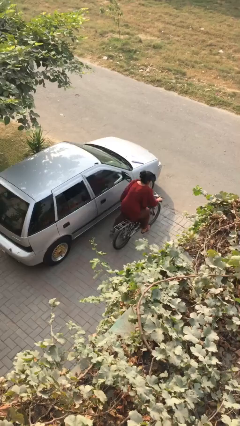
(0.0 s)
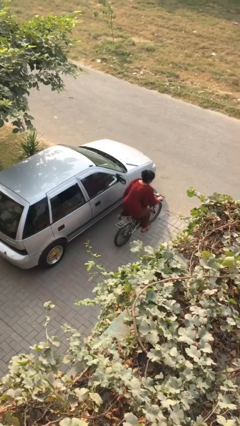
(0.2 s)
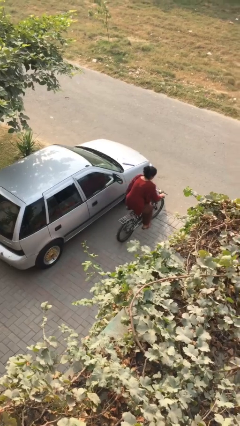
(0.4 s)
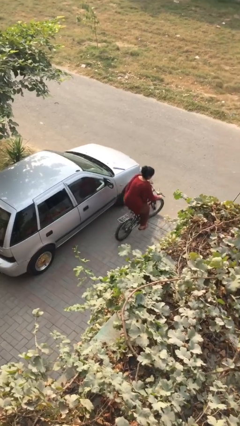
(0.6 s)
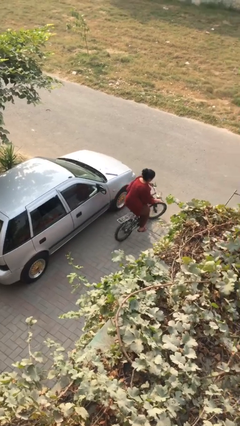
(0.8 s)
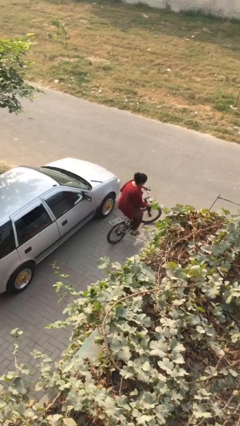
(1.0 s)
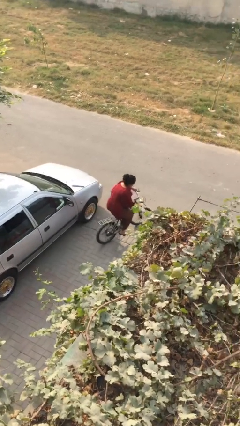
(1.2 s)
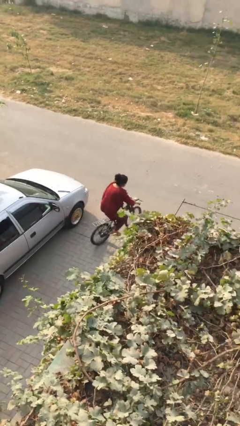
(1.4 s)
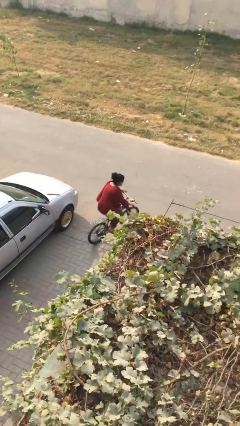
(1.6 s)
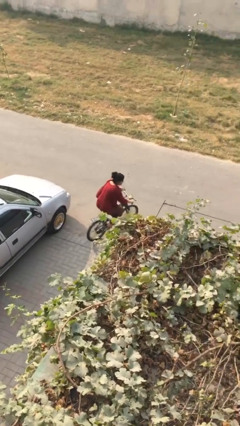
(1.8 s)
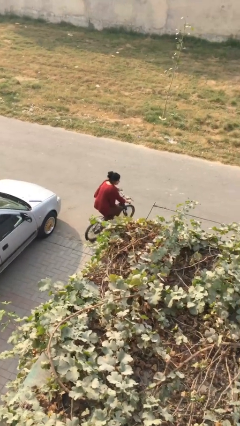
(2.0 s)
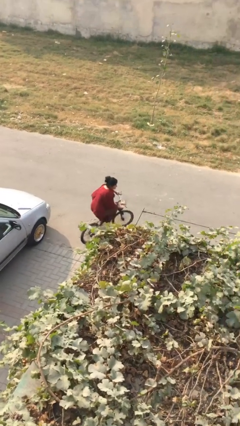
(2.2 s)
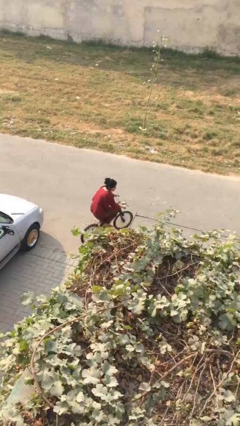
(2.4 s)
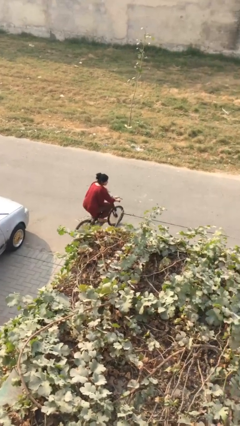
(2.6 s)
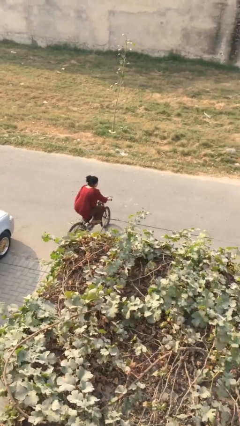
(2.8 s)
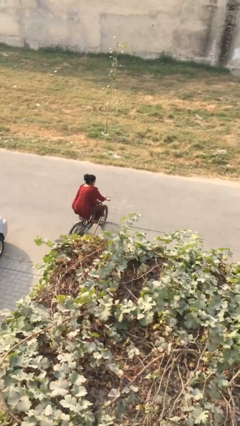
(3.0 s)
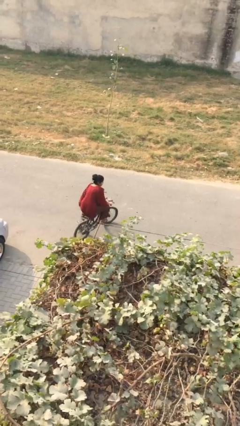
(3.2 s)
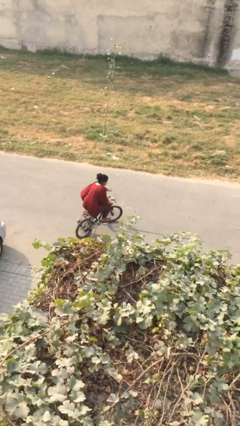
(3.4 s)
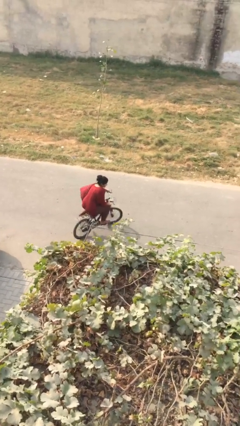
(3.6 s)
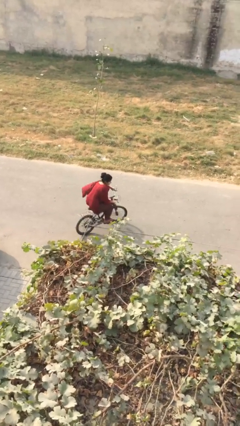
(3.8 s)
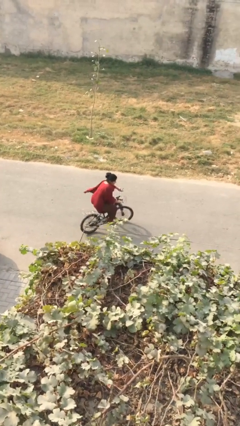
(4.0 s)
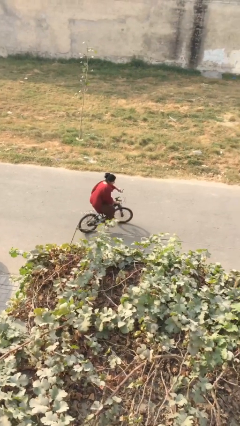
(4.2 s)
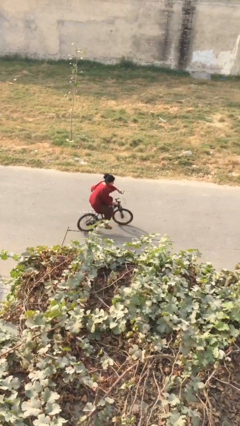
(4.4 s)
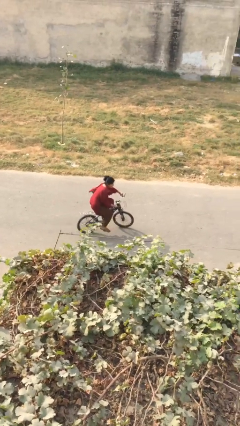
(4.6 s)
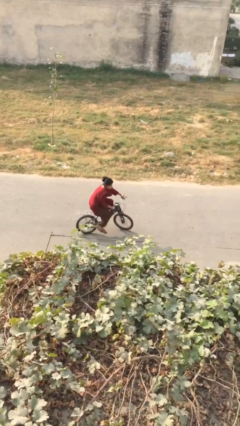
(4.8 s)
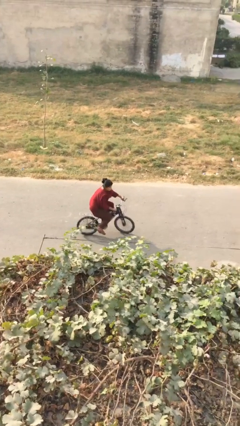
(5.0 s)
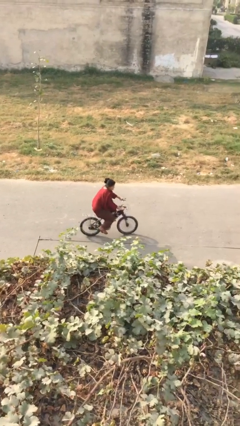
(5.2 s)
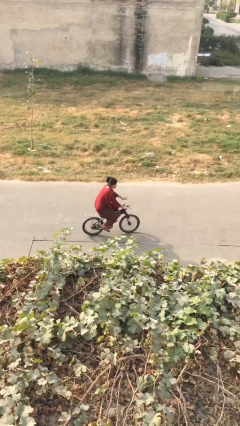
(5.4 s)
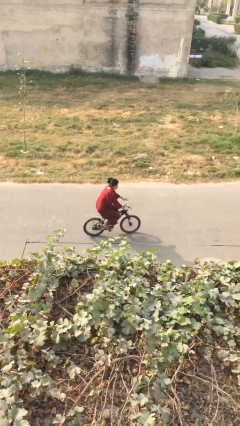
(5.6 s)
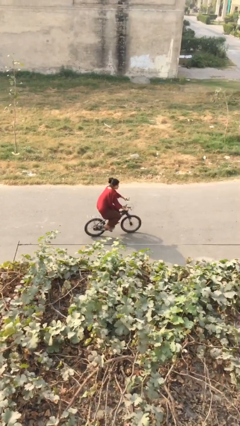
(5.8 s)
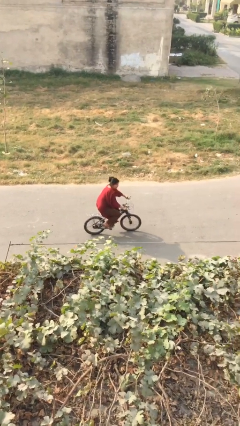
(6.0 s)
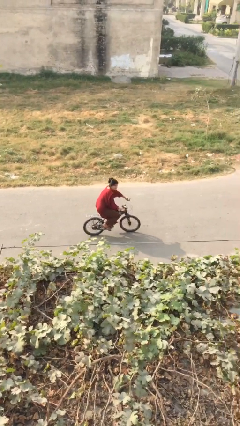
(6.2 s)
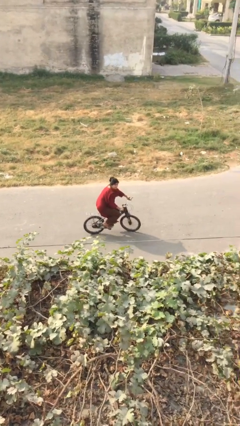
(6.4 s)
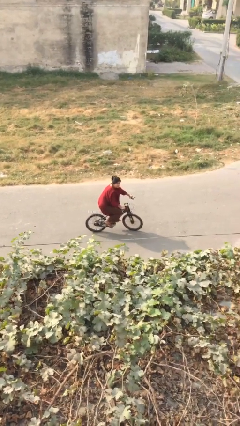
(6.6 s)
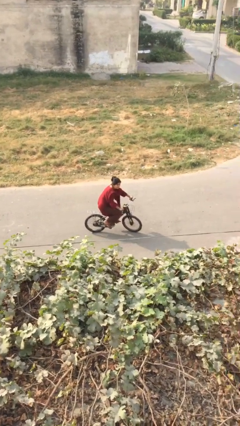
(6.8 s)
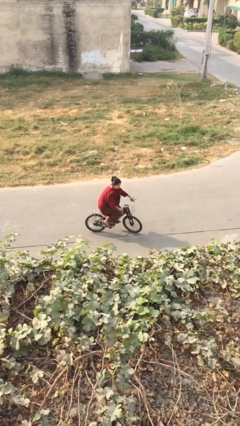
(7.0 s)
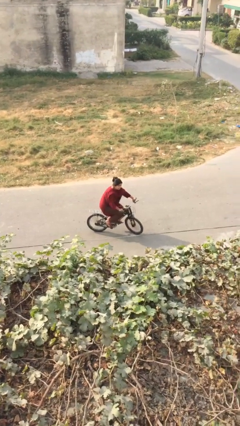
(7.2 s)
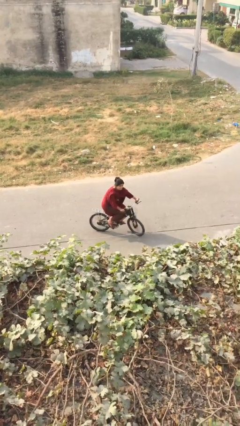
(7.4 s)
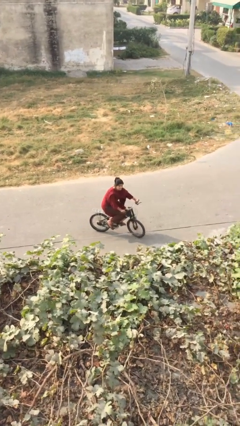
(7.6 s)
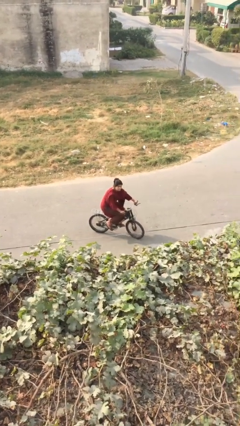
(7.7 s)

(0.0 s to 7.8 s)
person rides bicycle

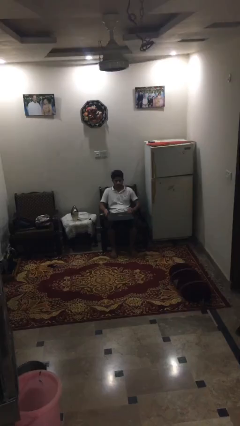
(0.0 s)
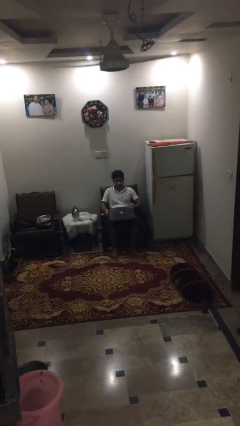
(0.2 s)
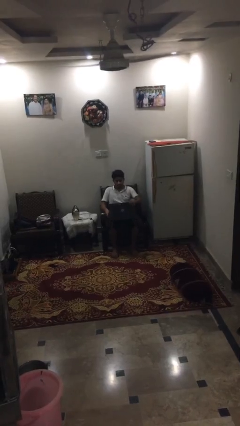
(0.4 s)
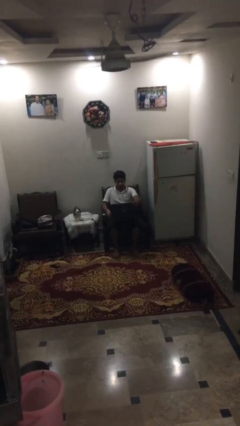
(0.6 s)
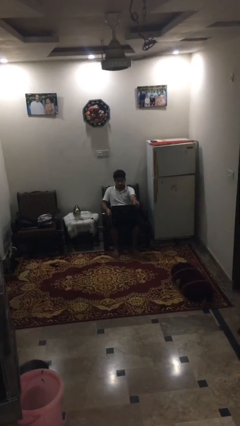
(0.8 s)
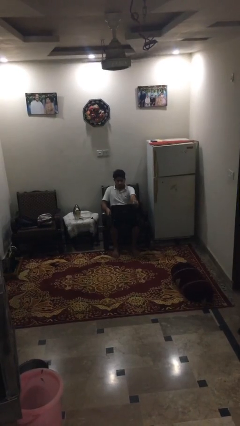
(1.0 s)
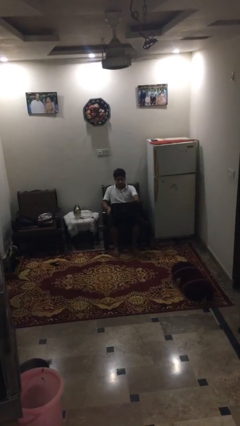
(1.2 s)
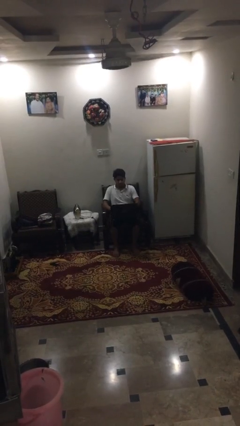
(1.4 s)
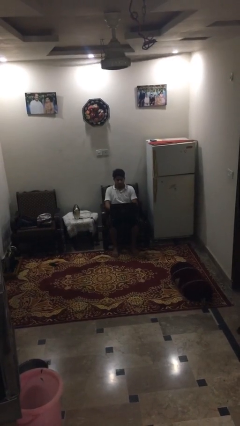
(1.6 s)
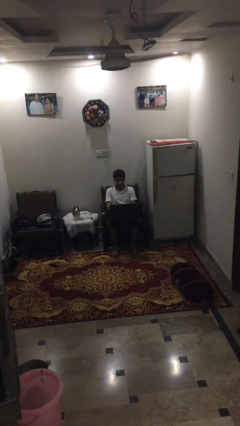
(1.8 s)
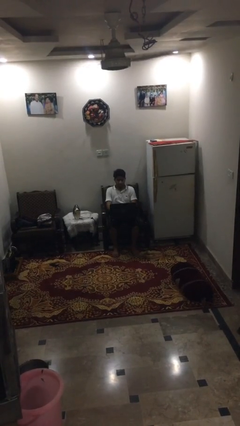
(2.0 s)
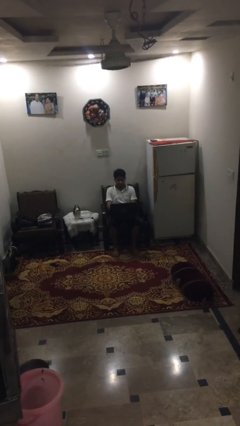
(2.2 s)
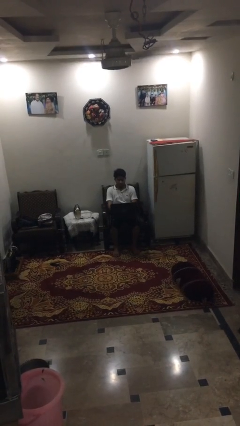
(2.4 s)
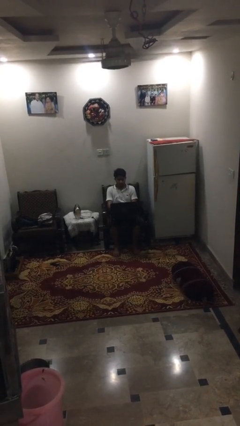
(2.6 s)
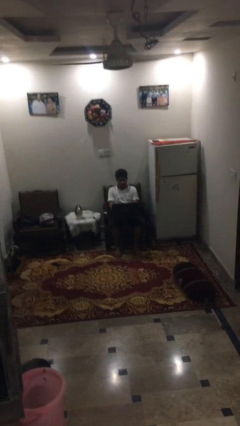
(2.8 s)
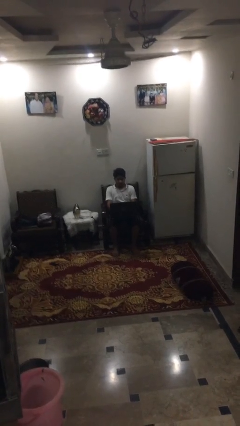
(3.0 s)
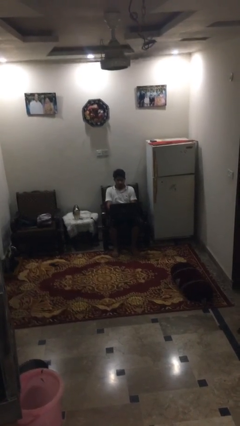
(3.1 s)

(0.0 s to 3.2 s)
person opens laptop

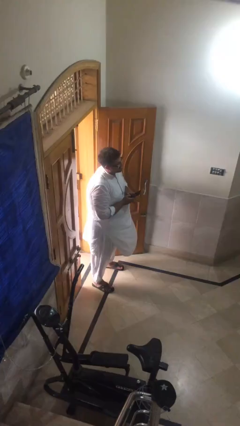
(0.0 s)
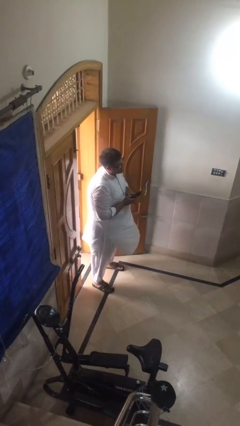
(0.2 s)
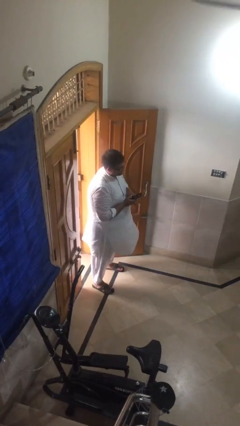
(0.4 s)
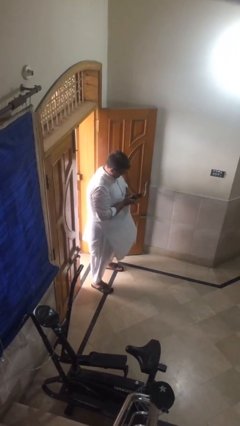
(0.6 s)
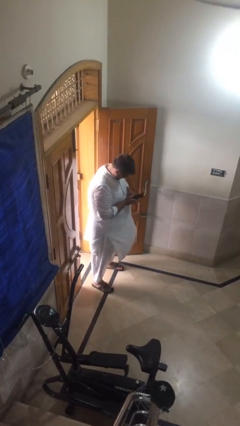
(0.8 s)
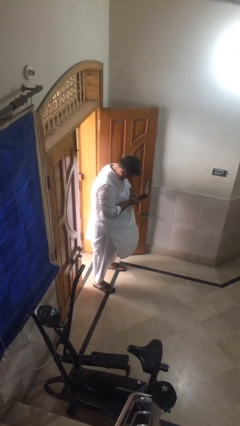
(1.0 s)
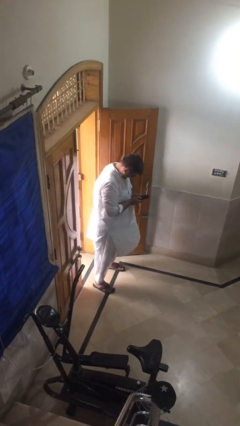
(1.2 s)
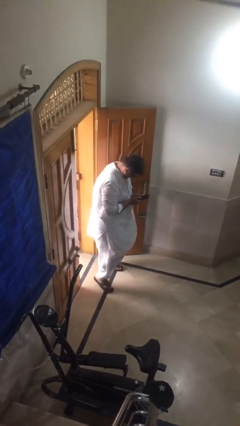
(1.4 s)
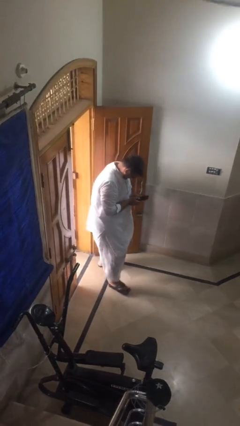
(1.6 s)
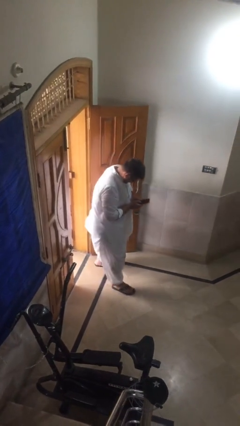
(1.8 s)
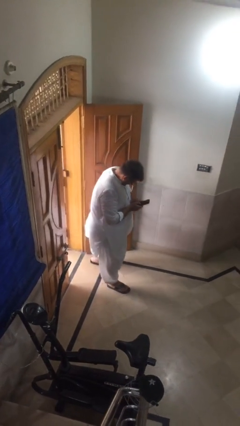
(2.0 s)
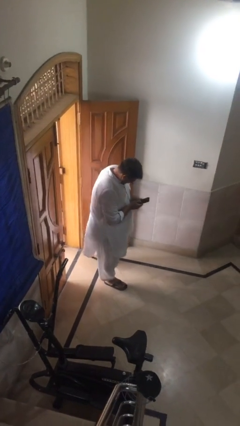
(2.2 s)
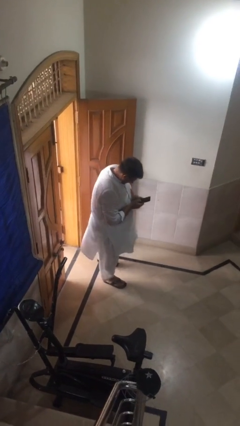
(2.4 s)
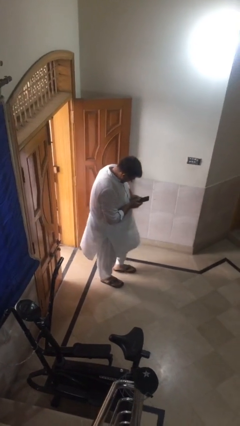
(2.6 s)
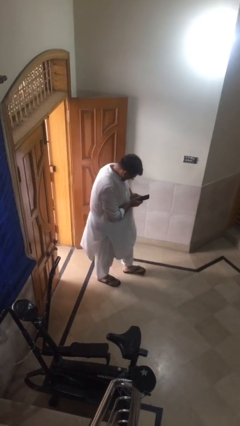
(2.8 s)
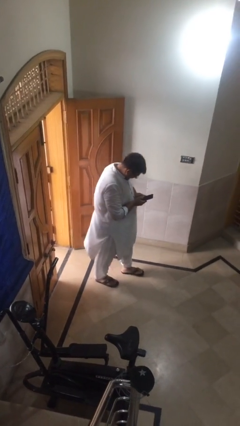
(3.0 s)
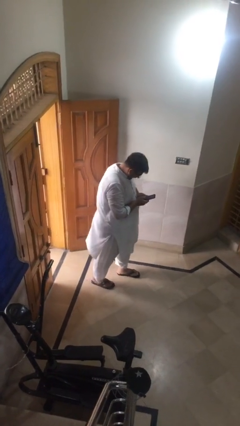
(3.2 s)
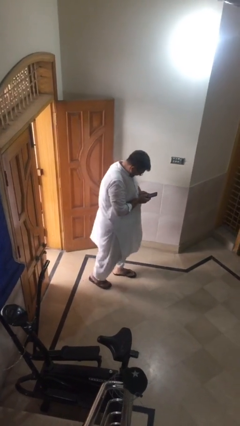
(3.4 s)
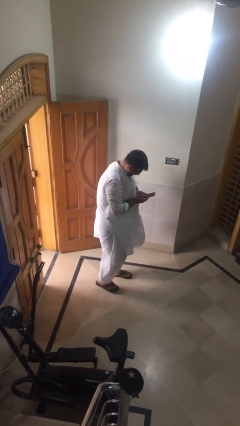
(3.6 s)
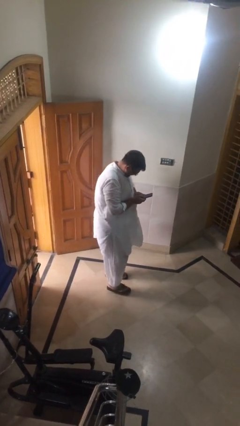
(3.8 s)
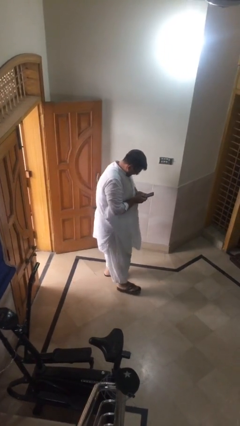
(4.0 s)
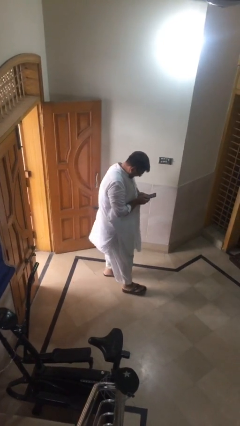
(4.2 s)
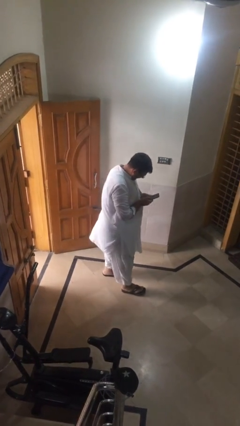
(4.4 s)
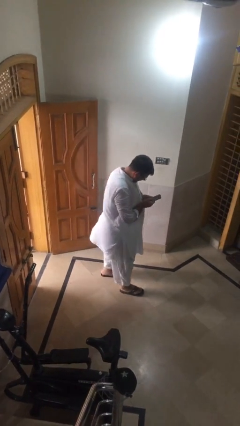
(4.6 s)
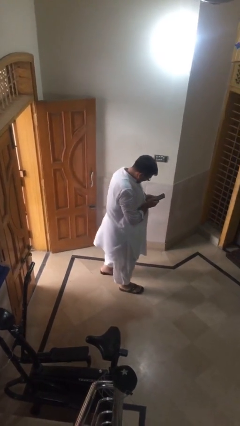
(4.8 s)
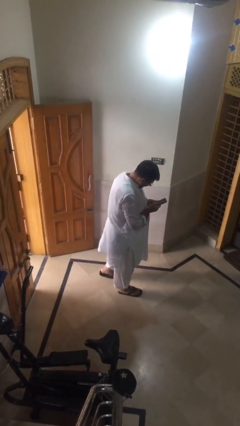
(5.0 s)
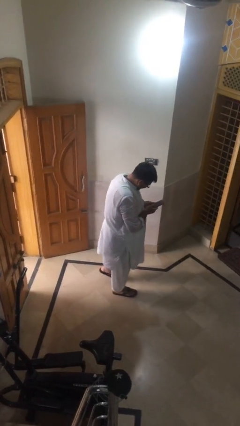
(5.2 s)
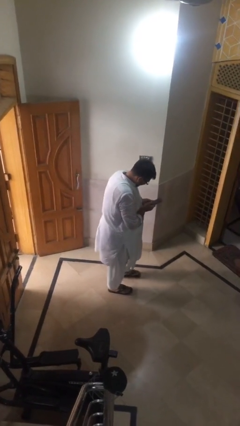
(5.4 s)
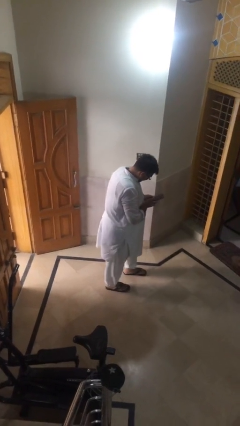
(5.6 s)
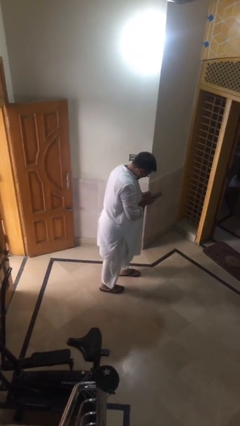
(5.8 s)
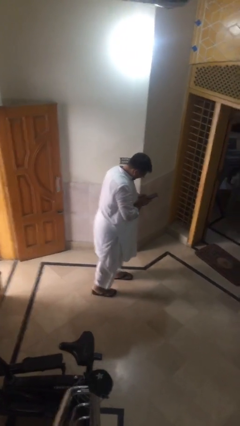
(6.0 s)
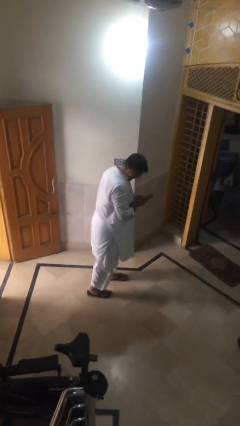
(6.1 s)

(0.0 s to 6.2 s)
person texts on phone

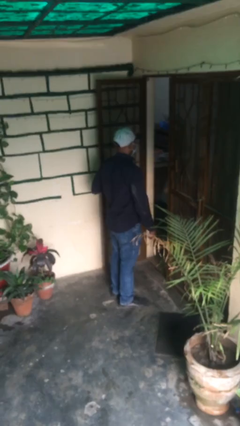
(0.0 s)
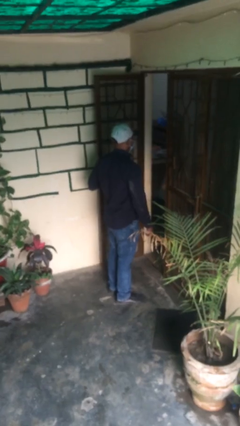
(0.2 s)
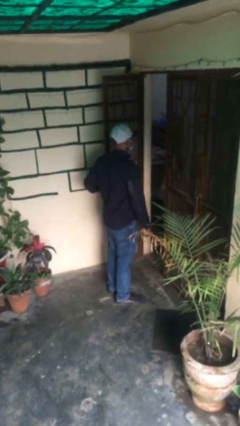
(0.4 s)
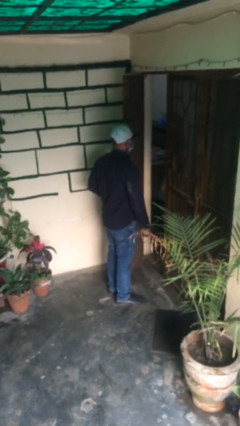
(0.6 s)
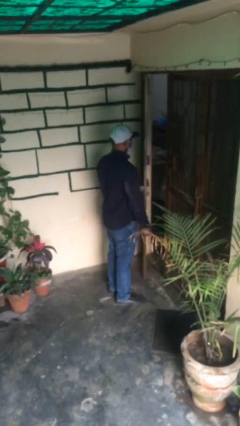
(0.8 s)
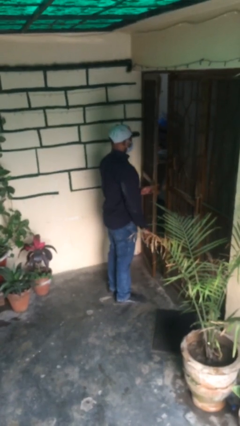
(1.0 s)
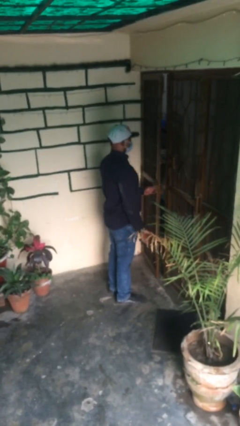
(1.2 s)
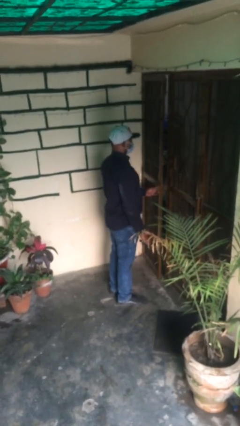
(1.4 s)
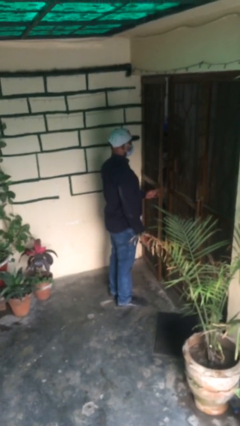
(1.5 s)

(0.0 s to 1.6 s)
person closes facility door
